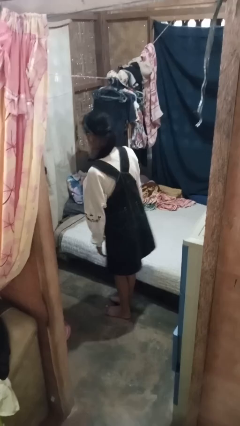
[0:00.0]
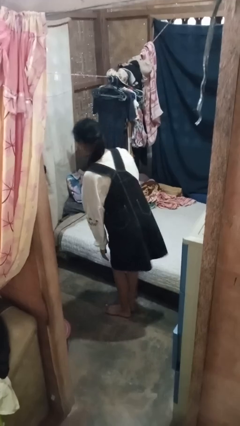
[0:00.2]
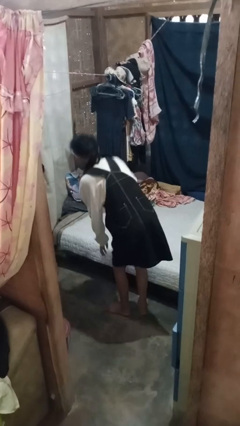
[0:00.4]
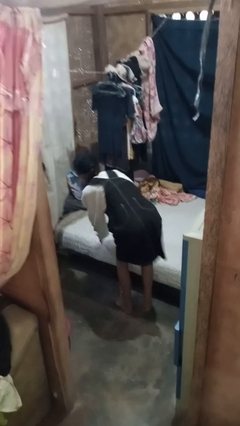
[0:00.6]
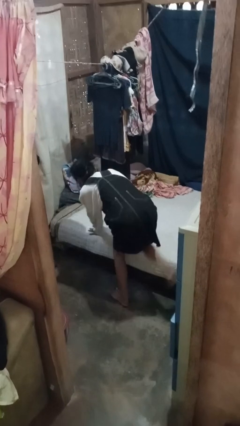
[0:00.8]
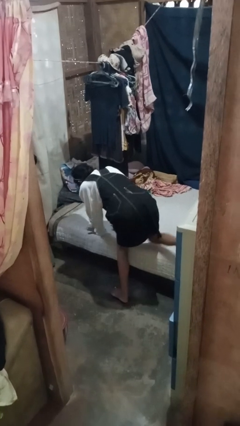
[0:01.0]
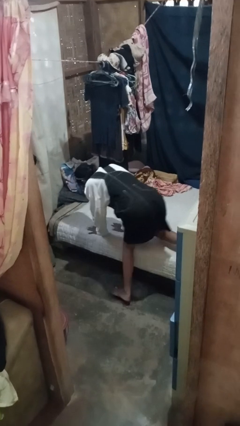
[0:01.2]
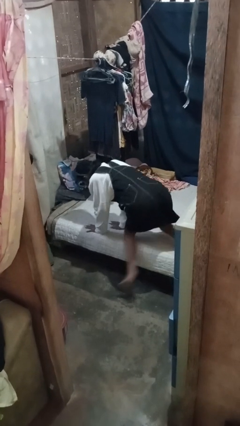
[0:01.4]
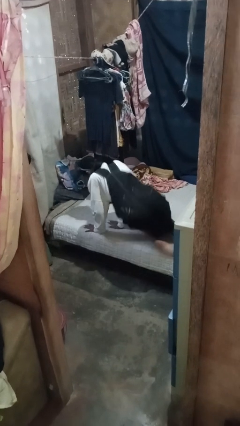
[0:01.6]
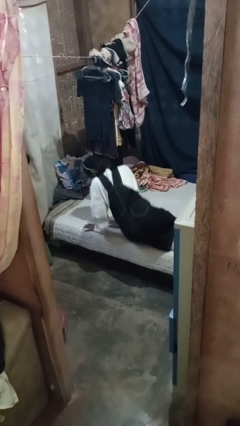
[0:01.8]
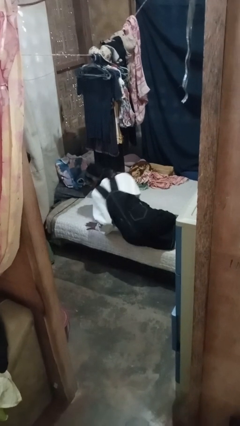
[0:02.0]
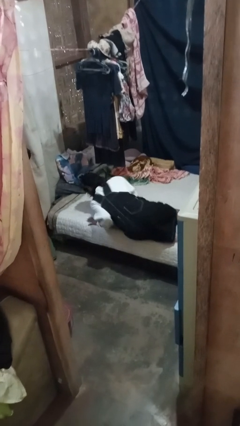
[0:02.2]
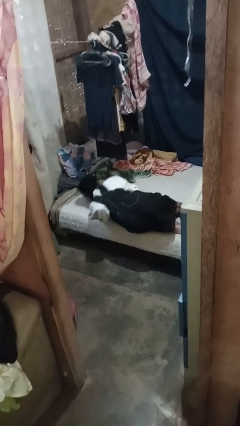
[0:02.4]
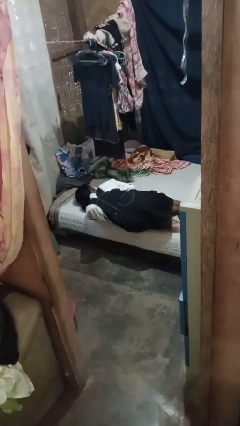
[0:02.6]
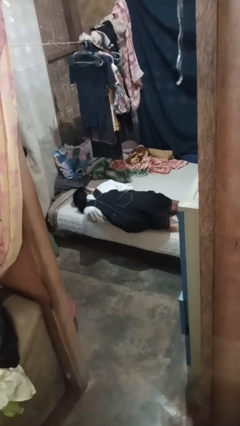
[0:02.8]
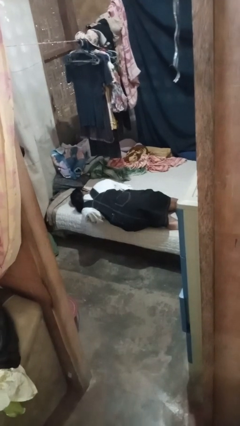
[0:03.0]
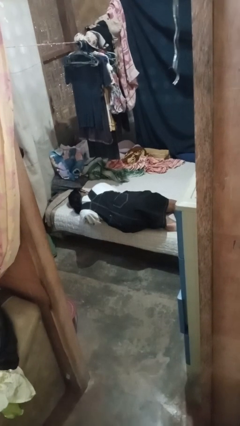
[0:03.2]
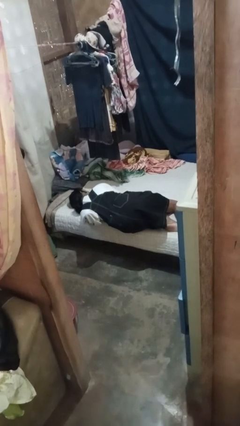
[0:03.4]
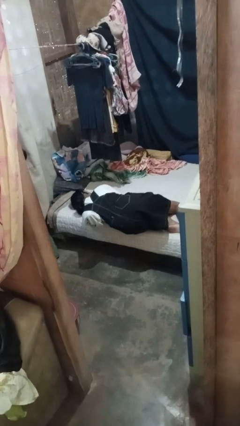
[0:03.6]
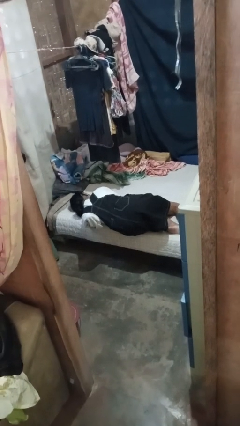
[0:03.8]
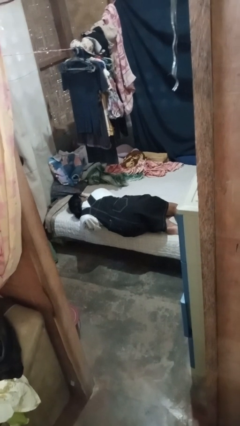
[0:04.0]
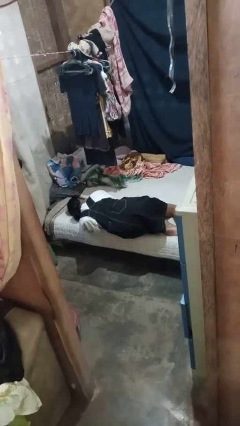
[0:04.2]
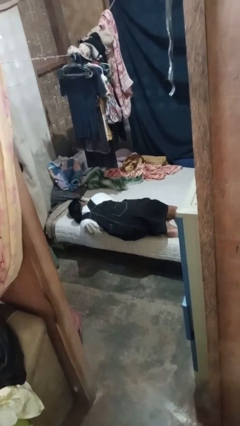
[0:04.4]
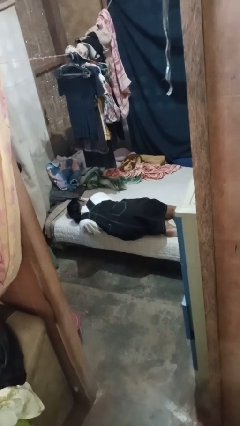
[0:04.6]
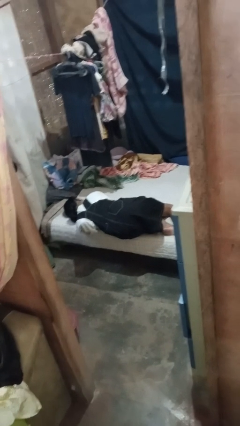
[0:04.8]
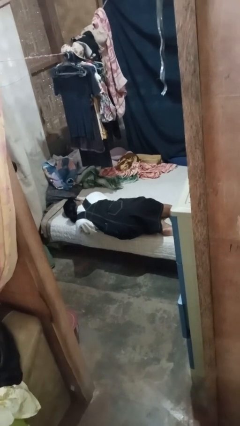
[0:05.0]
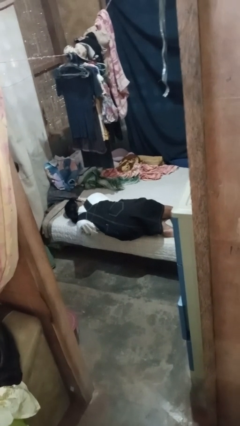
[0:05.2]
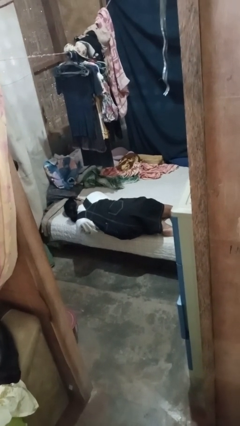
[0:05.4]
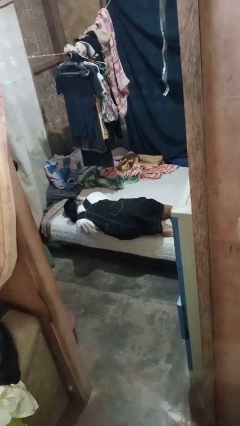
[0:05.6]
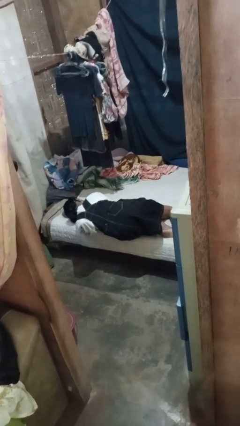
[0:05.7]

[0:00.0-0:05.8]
person lies down on bed

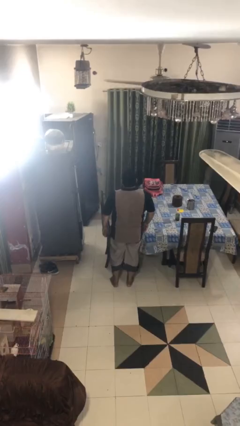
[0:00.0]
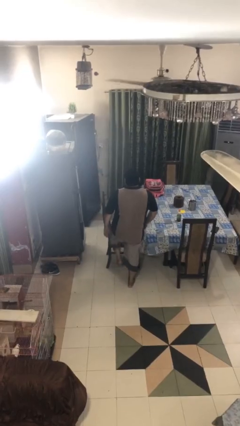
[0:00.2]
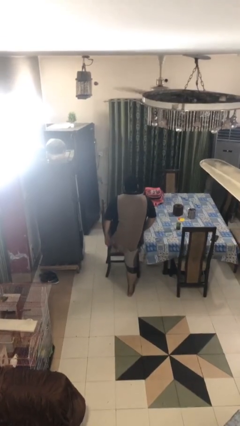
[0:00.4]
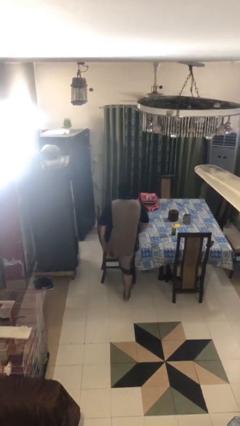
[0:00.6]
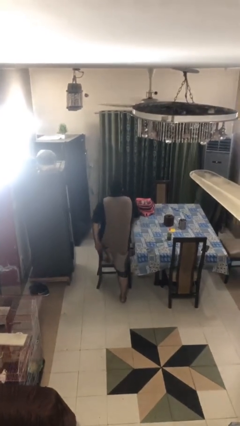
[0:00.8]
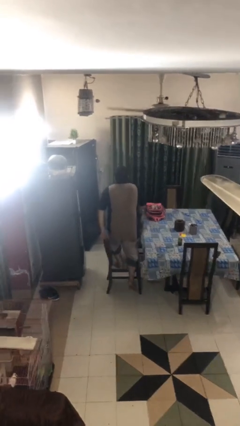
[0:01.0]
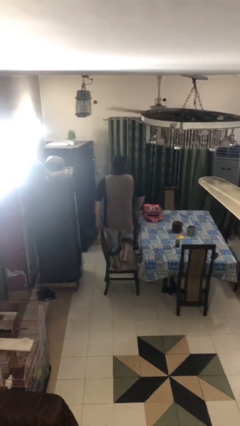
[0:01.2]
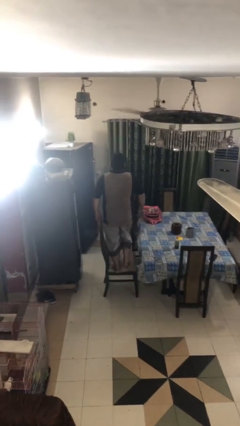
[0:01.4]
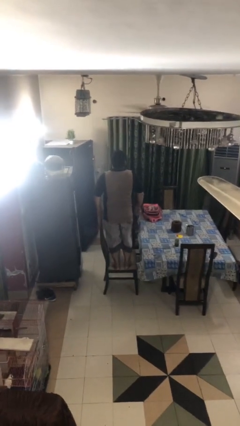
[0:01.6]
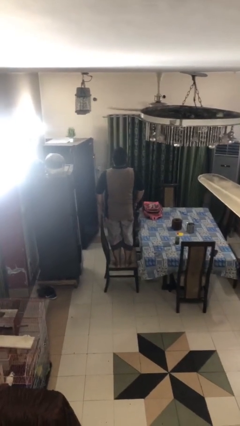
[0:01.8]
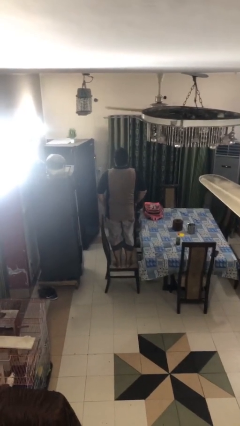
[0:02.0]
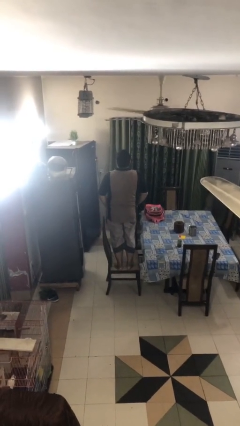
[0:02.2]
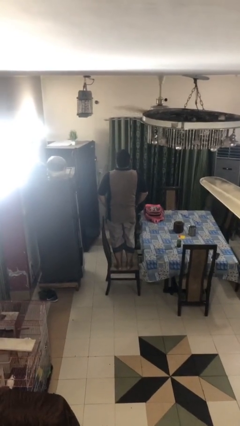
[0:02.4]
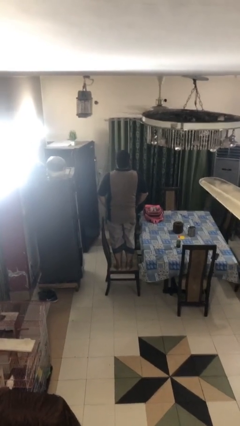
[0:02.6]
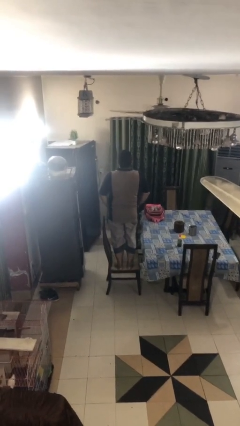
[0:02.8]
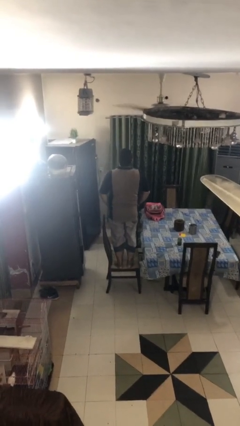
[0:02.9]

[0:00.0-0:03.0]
person climbs on chair

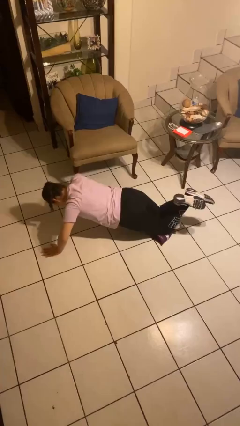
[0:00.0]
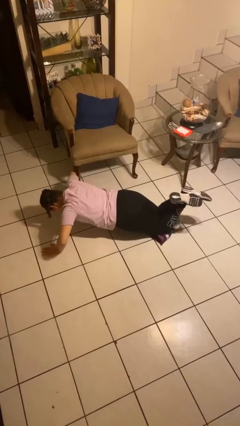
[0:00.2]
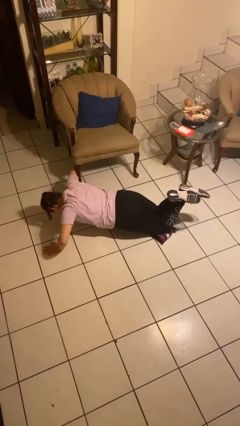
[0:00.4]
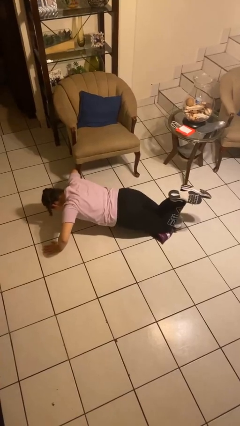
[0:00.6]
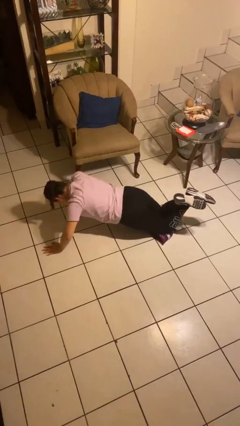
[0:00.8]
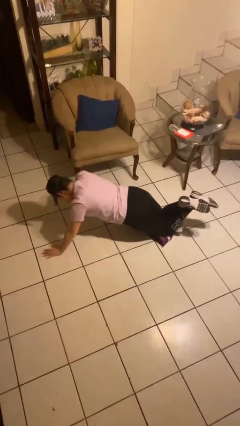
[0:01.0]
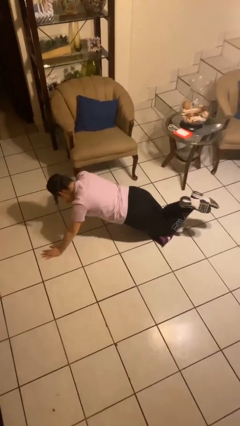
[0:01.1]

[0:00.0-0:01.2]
person exercises with pushup

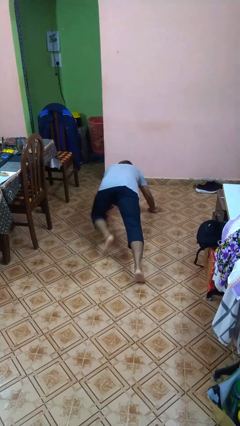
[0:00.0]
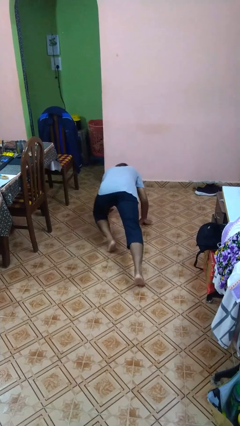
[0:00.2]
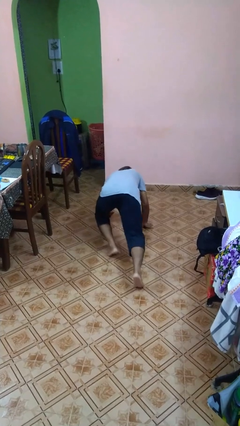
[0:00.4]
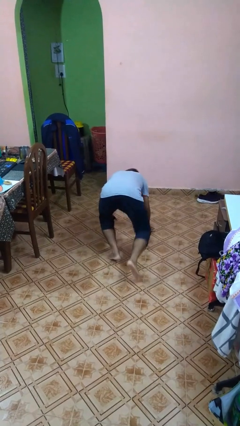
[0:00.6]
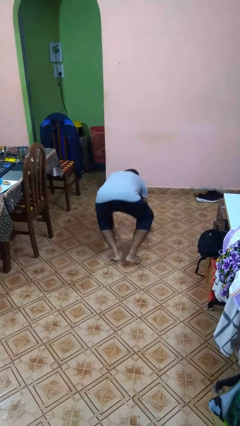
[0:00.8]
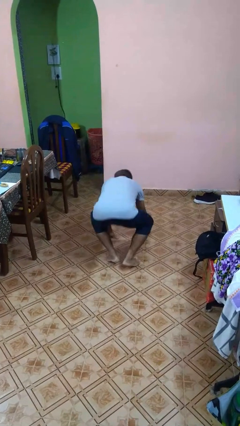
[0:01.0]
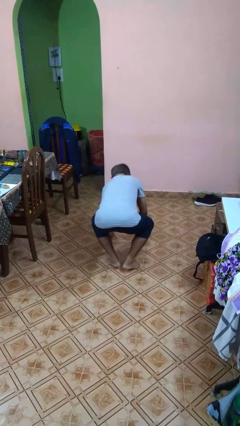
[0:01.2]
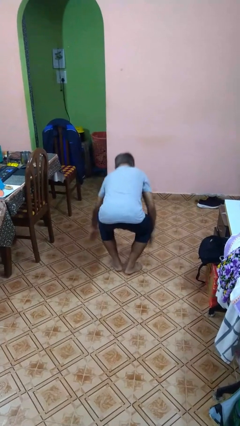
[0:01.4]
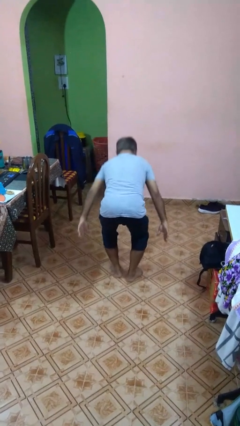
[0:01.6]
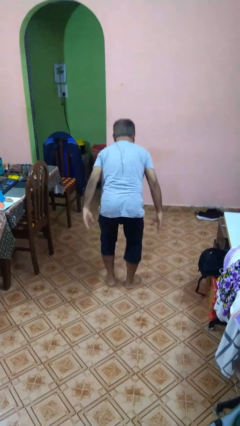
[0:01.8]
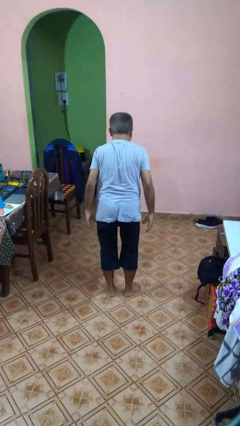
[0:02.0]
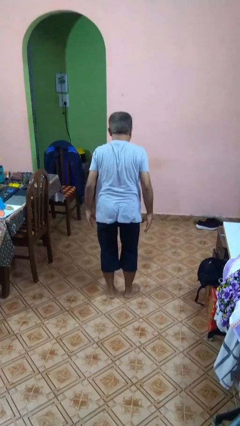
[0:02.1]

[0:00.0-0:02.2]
person stands up from floor

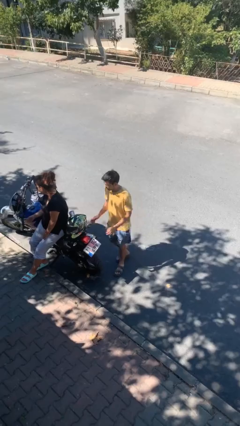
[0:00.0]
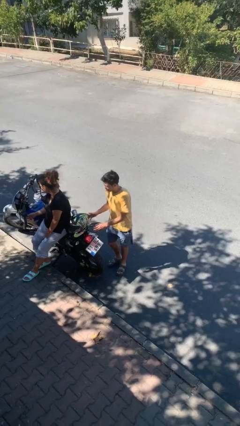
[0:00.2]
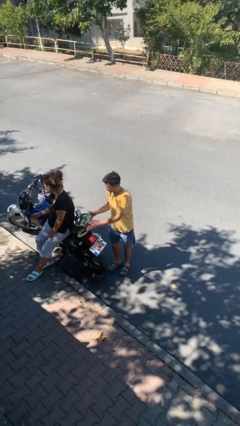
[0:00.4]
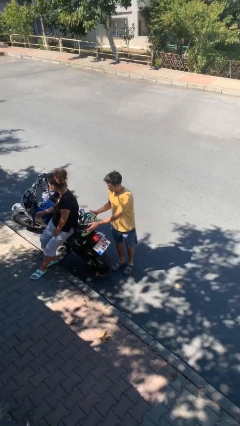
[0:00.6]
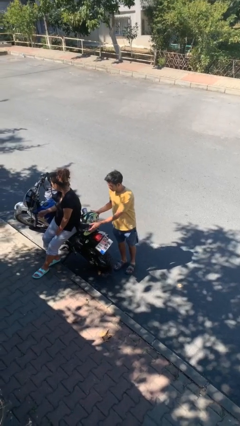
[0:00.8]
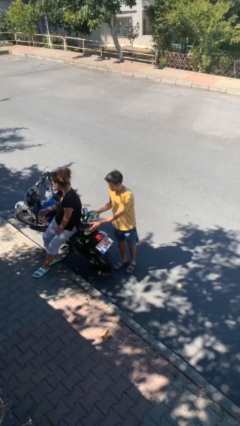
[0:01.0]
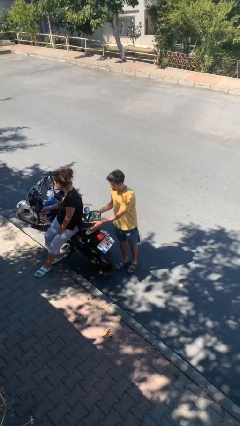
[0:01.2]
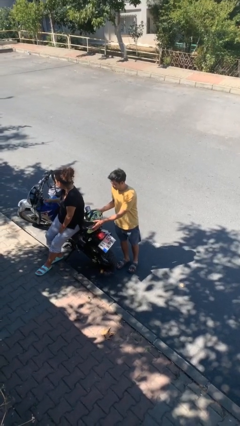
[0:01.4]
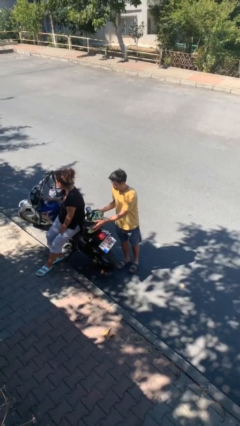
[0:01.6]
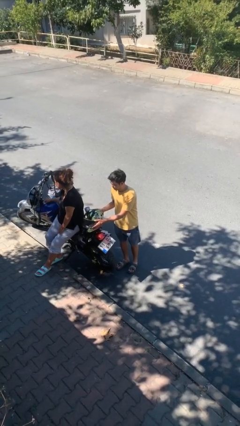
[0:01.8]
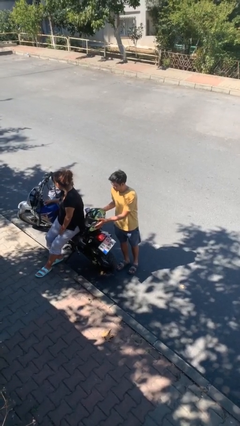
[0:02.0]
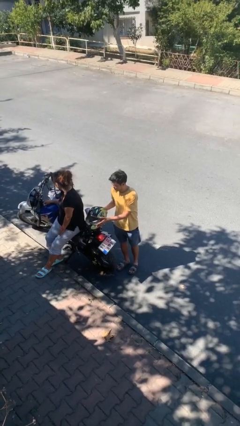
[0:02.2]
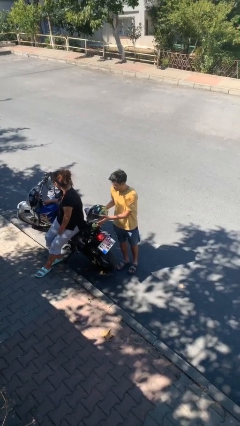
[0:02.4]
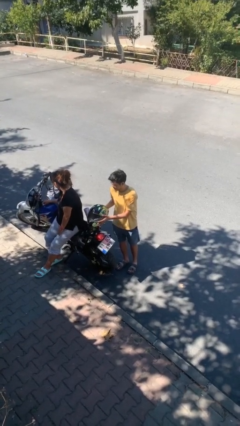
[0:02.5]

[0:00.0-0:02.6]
person steals object from person

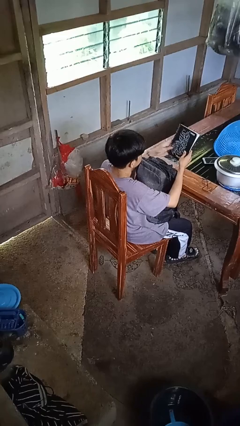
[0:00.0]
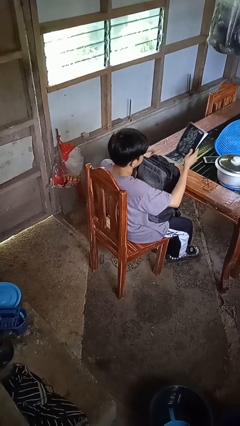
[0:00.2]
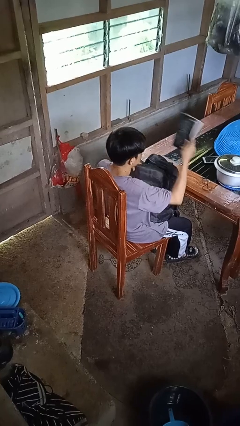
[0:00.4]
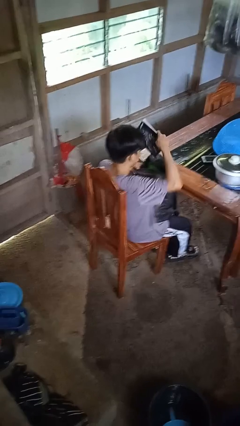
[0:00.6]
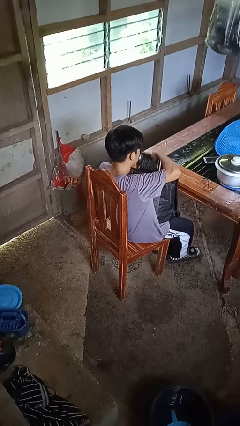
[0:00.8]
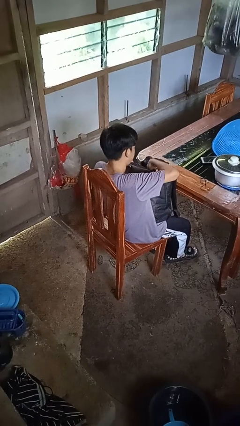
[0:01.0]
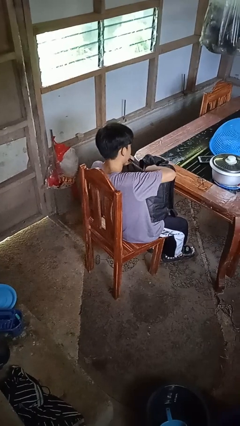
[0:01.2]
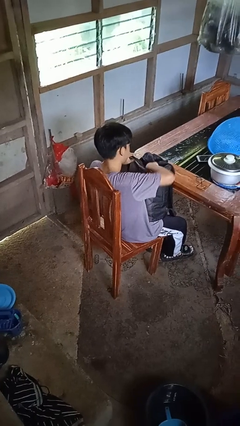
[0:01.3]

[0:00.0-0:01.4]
person puts object into backpack

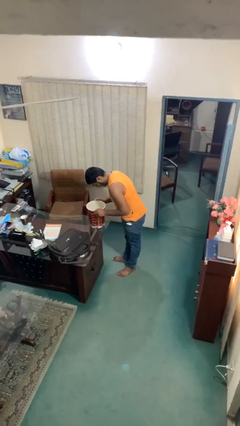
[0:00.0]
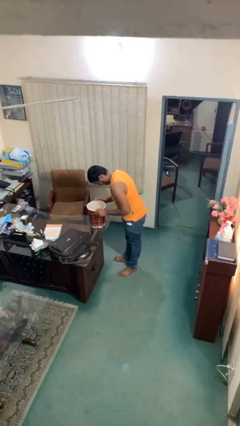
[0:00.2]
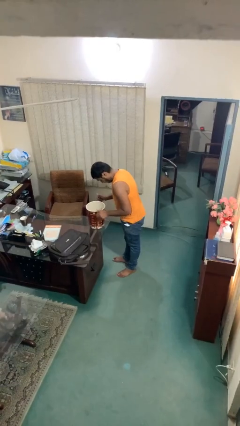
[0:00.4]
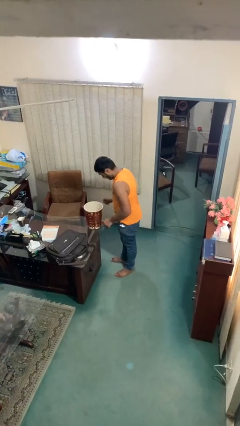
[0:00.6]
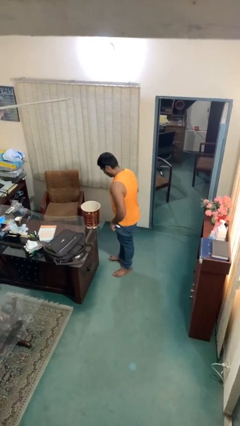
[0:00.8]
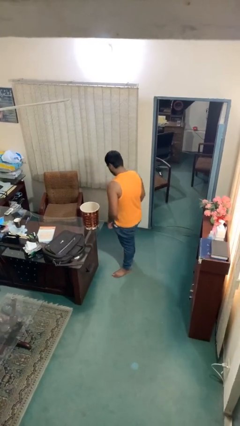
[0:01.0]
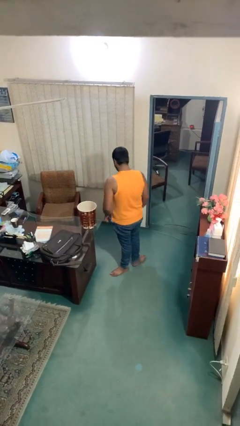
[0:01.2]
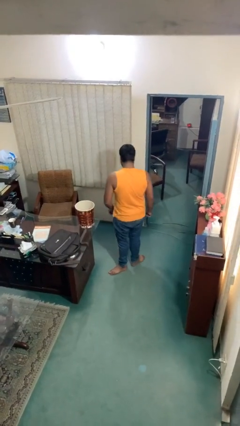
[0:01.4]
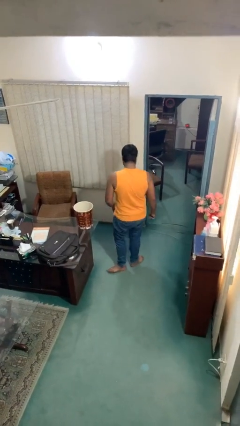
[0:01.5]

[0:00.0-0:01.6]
person puts down object on table
